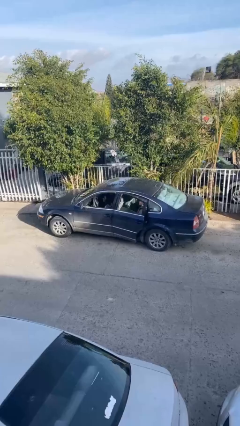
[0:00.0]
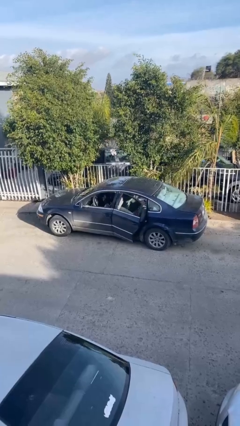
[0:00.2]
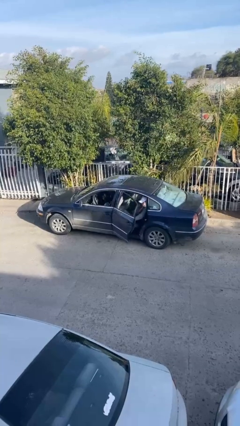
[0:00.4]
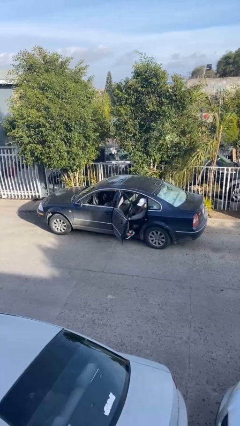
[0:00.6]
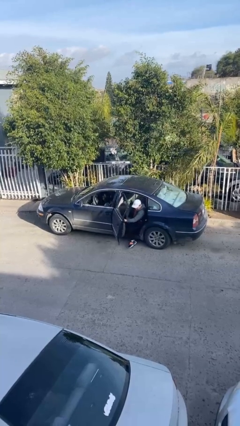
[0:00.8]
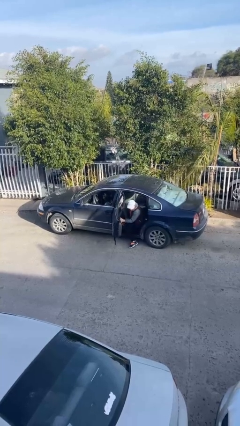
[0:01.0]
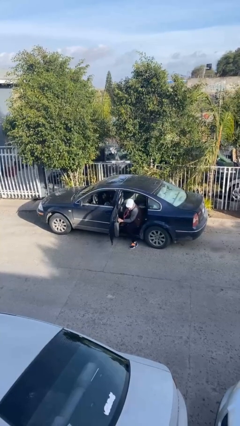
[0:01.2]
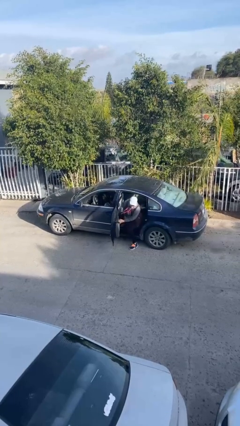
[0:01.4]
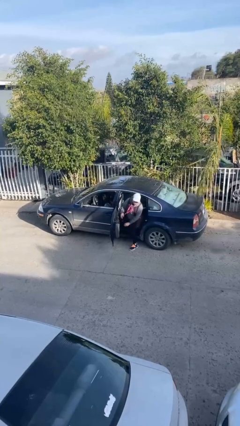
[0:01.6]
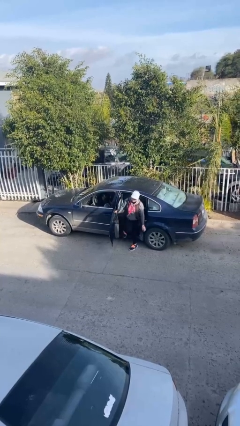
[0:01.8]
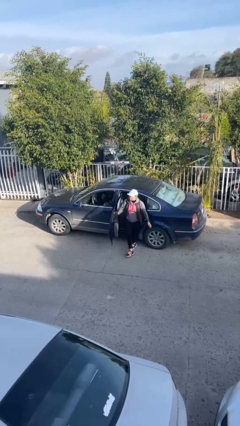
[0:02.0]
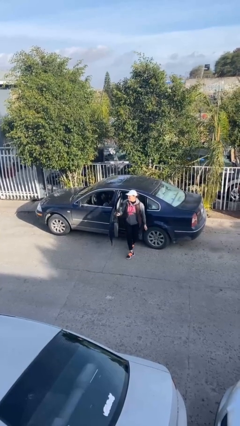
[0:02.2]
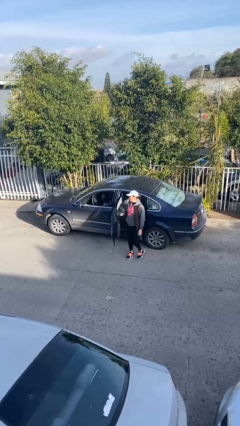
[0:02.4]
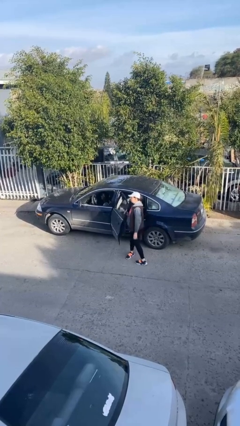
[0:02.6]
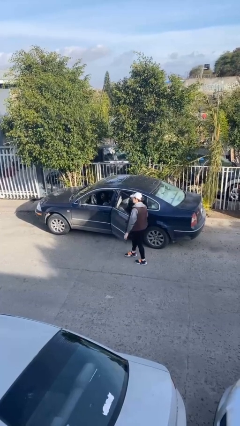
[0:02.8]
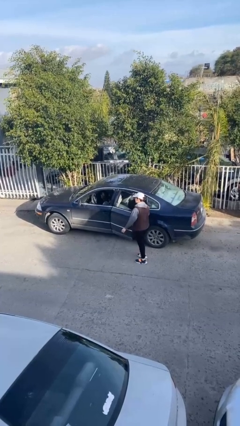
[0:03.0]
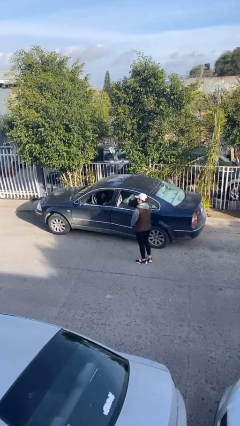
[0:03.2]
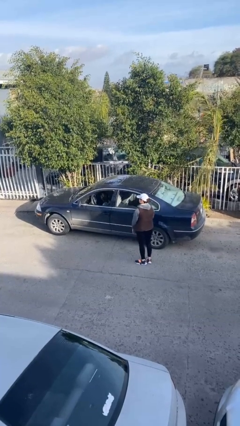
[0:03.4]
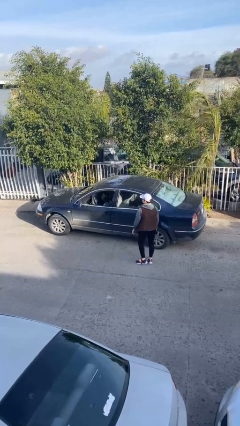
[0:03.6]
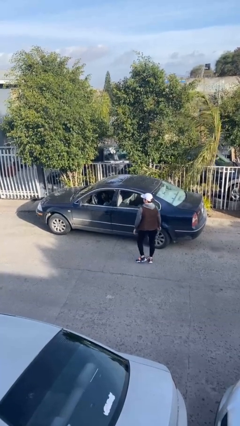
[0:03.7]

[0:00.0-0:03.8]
car drops off person

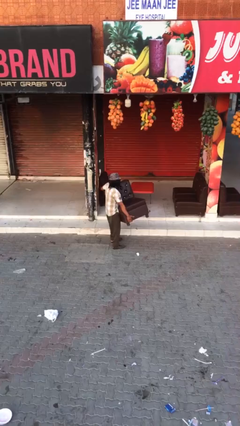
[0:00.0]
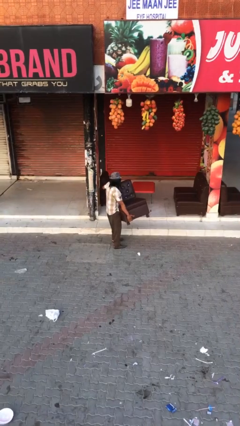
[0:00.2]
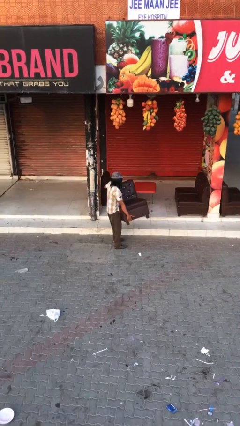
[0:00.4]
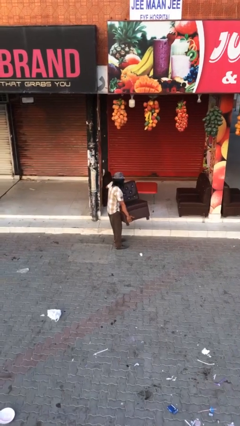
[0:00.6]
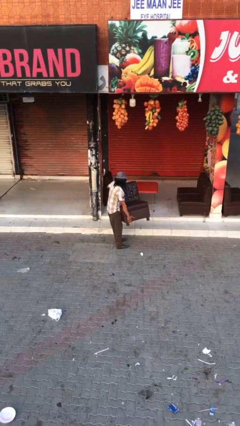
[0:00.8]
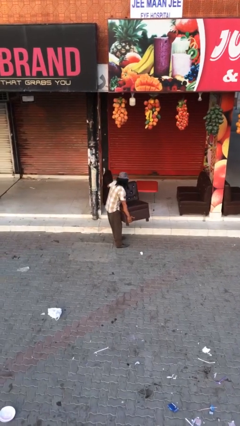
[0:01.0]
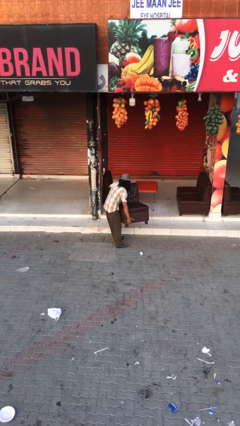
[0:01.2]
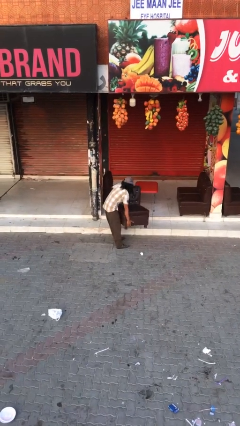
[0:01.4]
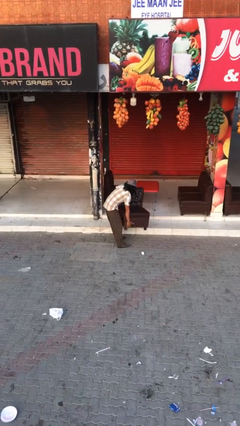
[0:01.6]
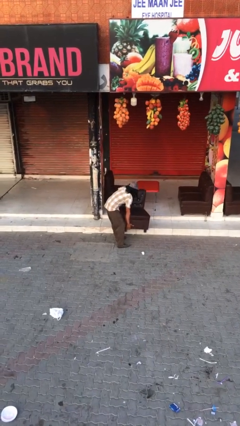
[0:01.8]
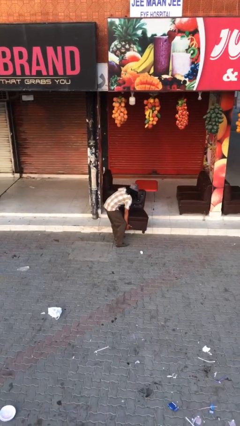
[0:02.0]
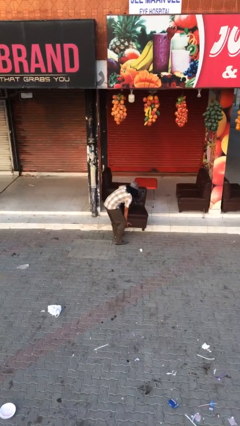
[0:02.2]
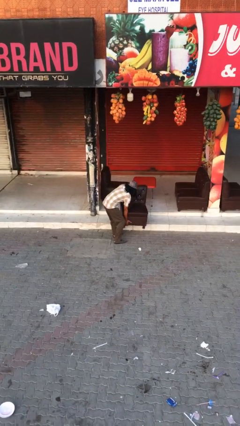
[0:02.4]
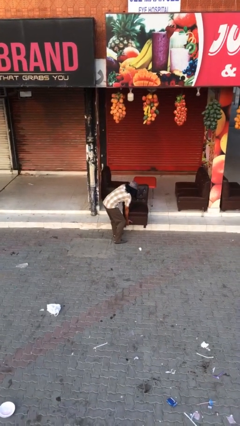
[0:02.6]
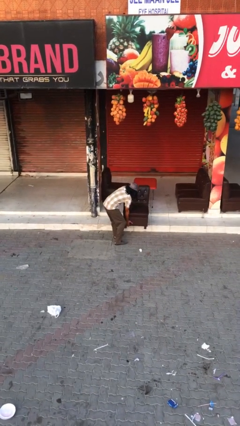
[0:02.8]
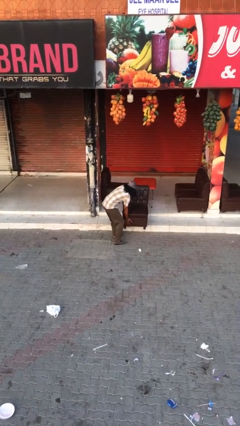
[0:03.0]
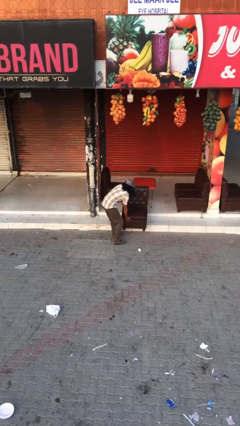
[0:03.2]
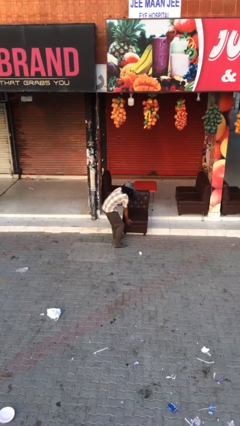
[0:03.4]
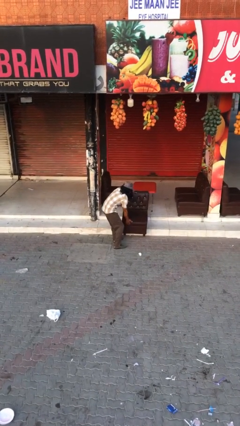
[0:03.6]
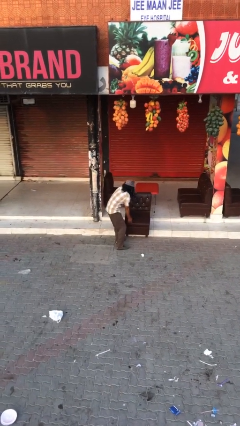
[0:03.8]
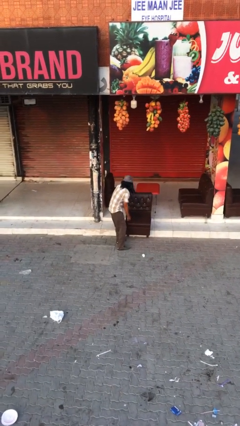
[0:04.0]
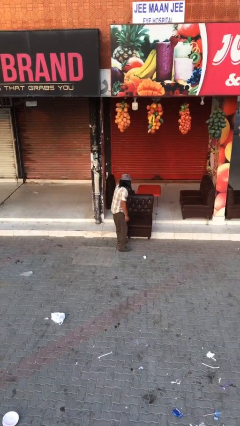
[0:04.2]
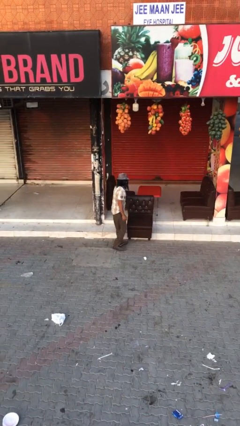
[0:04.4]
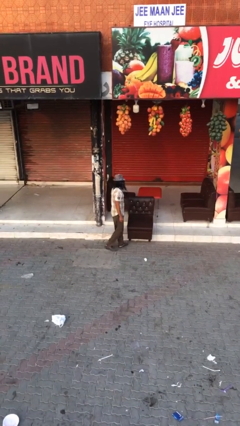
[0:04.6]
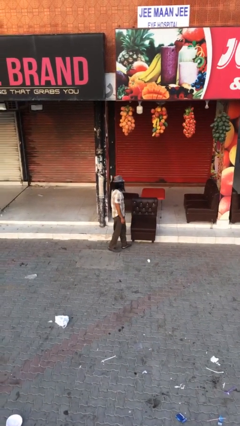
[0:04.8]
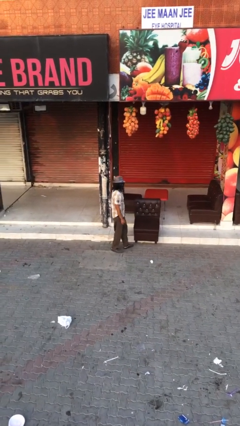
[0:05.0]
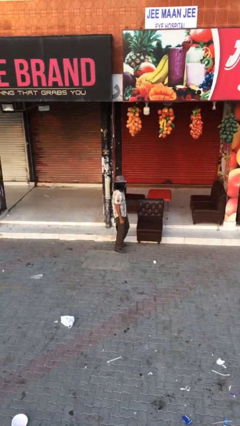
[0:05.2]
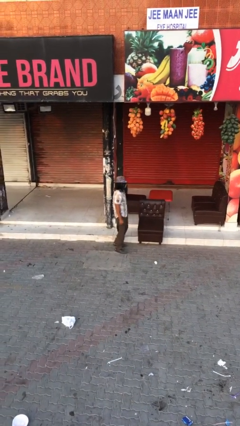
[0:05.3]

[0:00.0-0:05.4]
person puts down object on floor

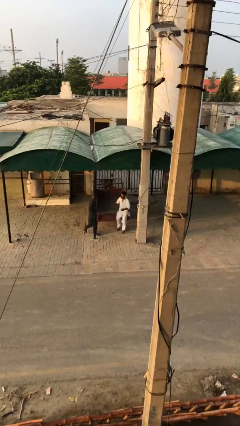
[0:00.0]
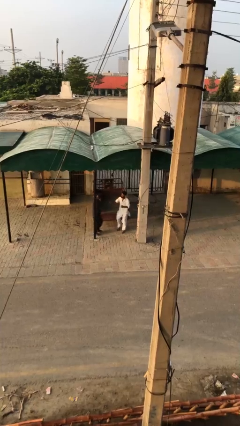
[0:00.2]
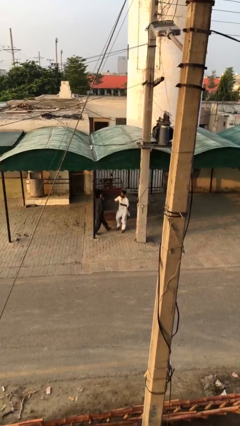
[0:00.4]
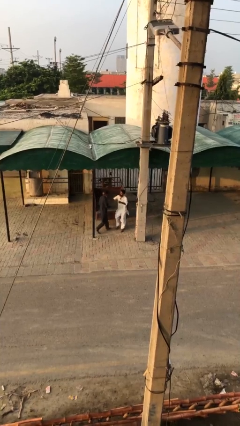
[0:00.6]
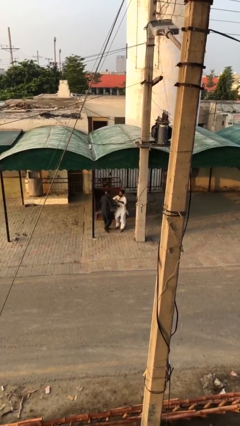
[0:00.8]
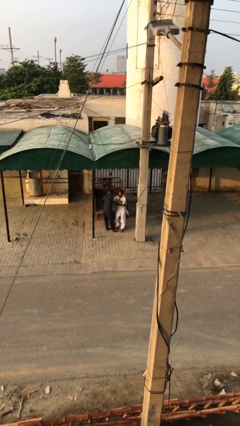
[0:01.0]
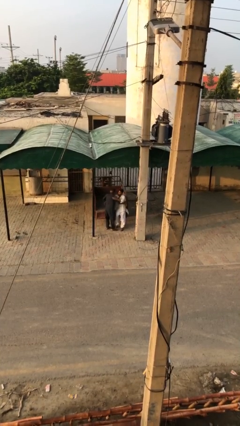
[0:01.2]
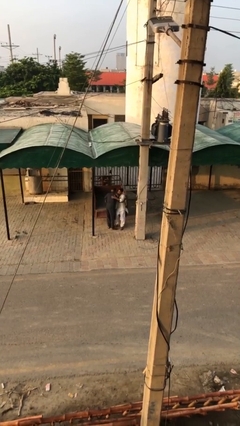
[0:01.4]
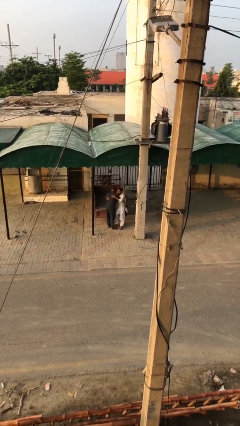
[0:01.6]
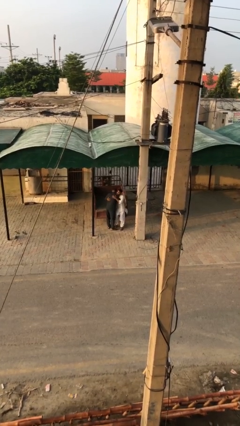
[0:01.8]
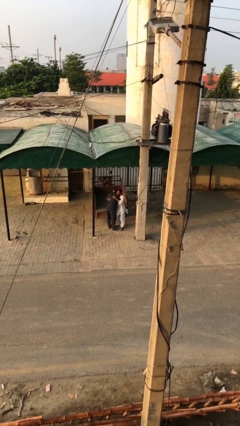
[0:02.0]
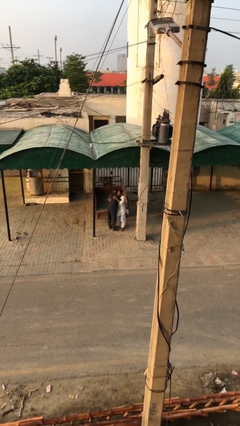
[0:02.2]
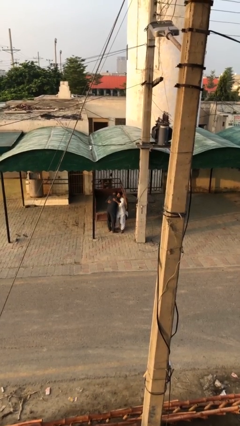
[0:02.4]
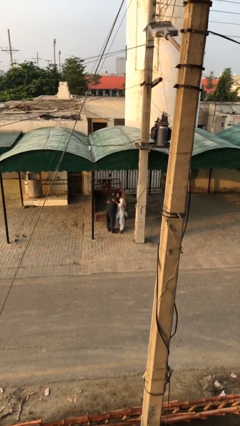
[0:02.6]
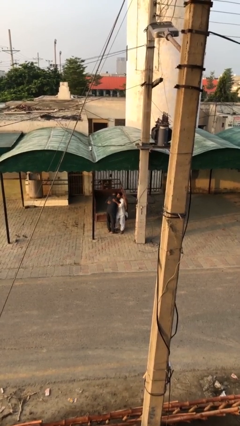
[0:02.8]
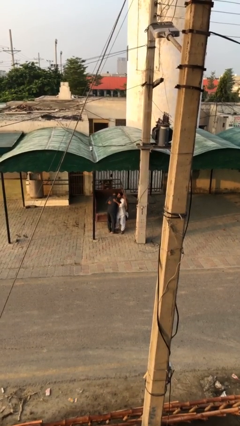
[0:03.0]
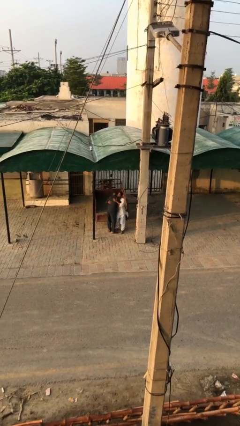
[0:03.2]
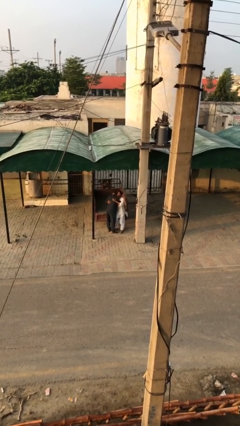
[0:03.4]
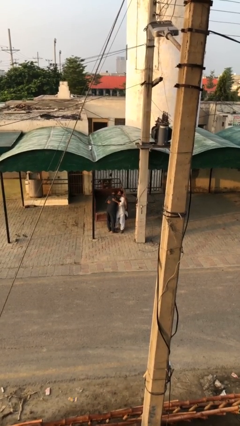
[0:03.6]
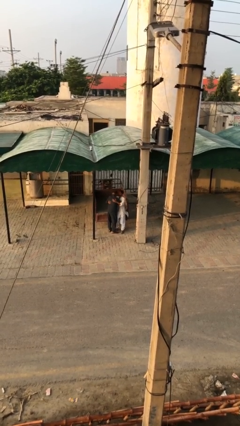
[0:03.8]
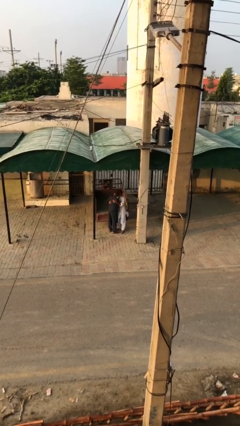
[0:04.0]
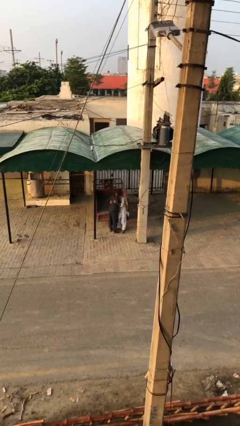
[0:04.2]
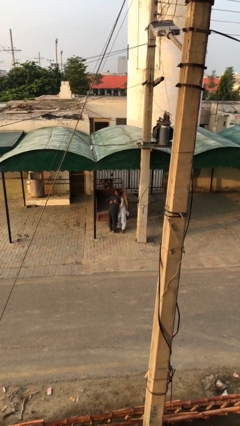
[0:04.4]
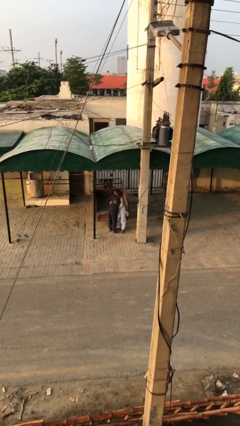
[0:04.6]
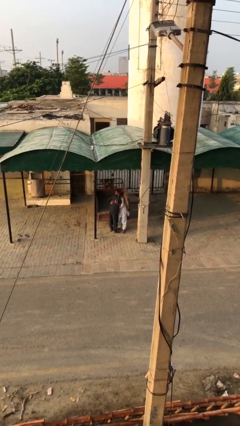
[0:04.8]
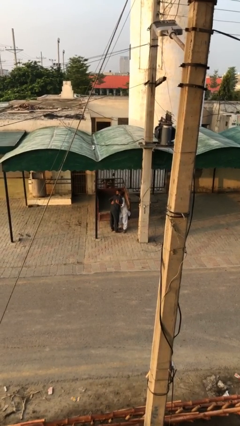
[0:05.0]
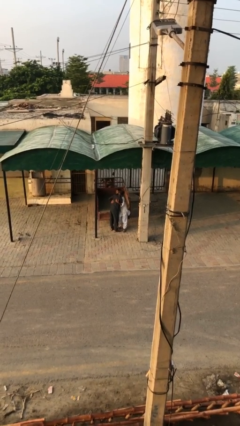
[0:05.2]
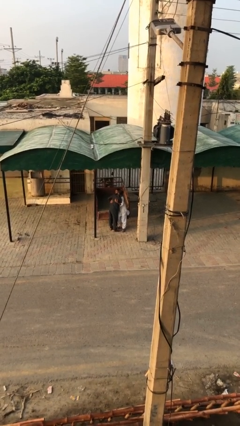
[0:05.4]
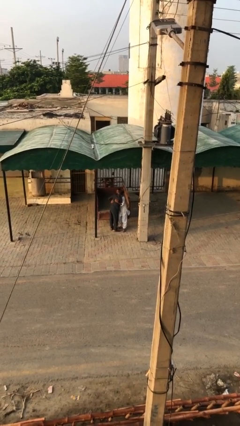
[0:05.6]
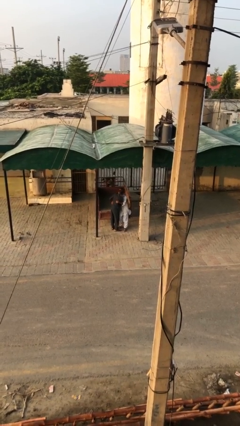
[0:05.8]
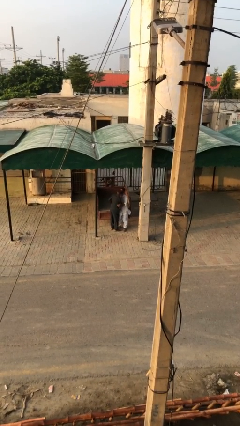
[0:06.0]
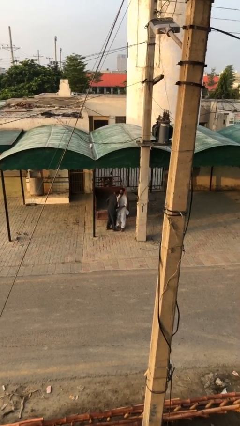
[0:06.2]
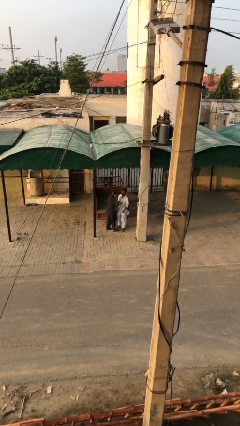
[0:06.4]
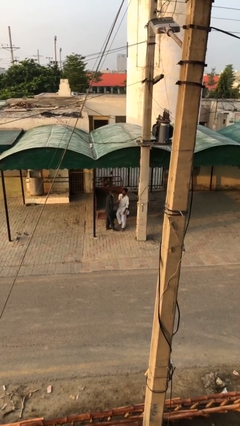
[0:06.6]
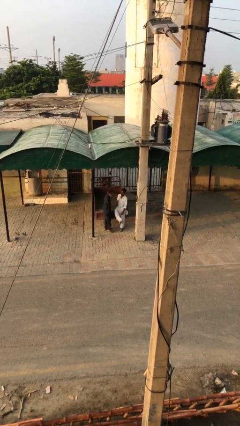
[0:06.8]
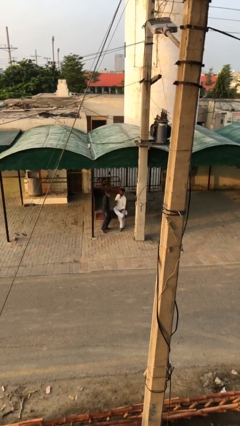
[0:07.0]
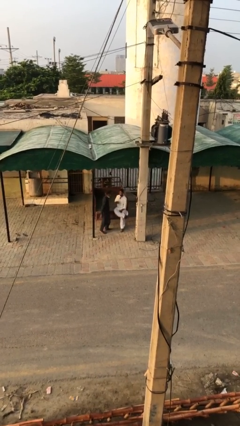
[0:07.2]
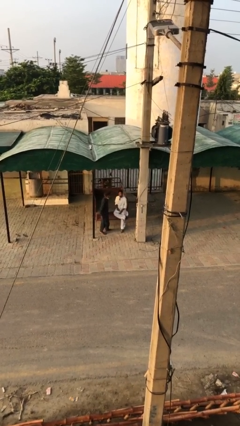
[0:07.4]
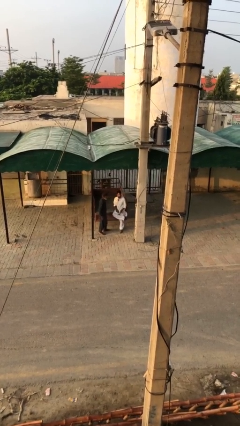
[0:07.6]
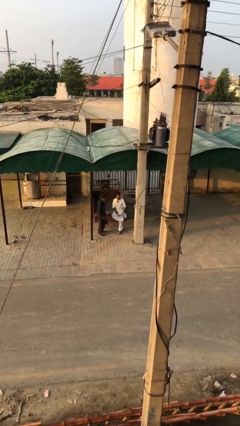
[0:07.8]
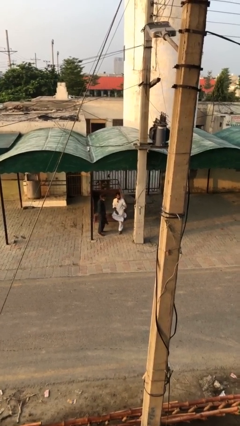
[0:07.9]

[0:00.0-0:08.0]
person embraces person

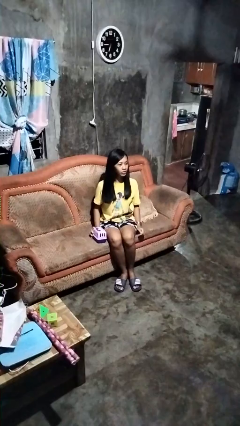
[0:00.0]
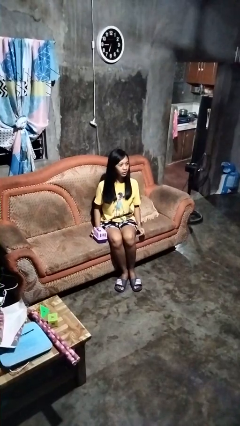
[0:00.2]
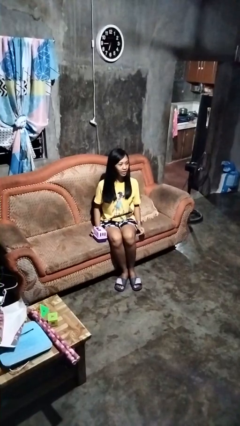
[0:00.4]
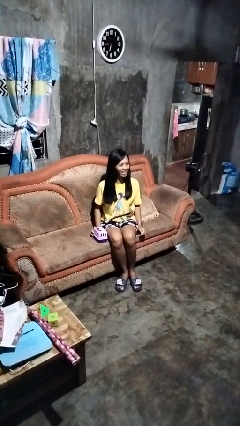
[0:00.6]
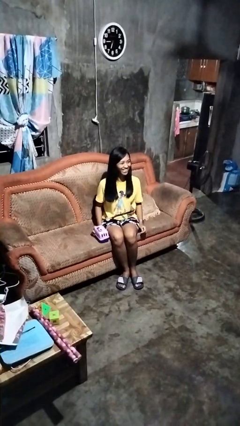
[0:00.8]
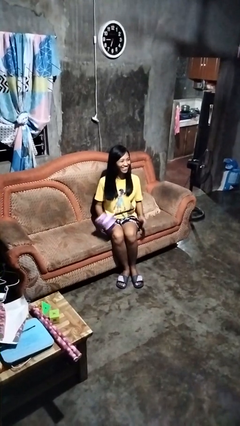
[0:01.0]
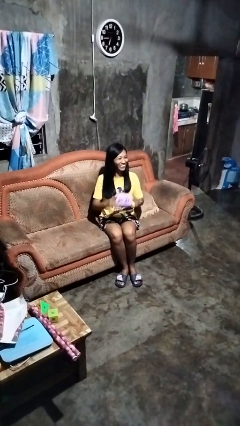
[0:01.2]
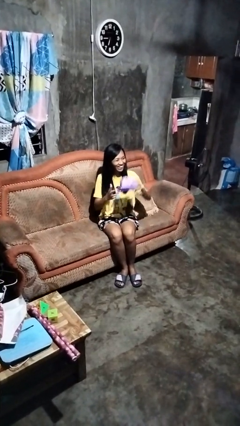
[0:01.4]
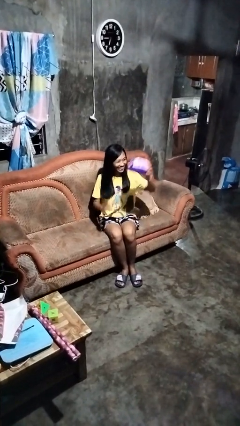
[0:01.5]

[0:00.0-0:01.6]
person holds object above head
